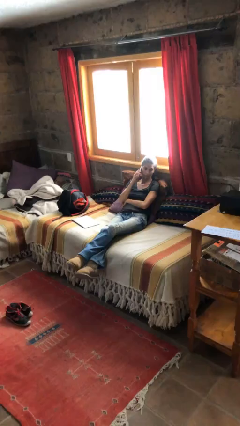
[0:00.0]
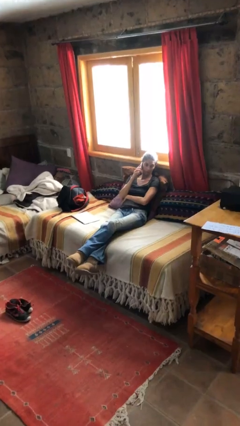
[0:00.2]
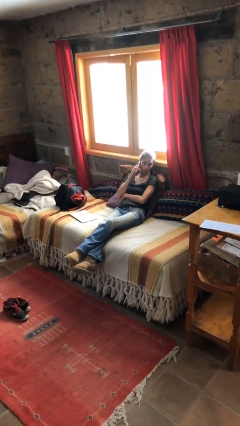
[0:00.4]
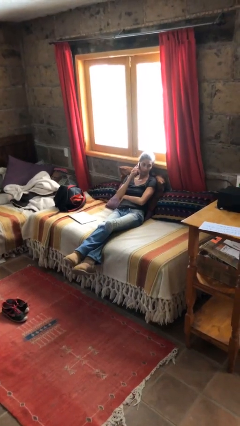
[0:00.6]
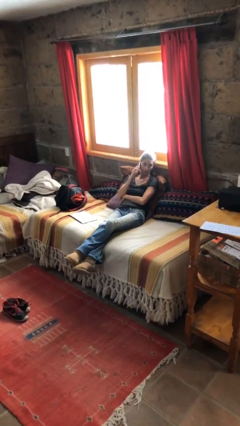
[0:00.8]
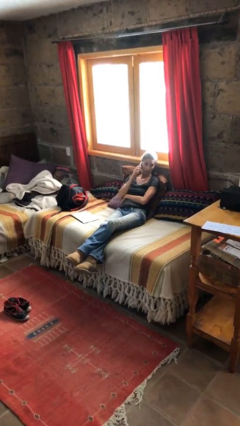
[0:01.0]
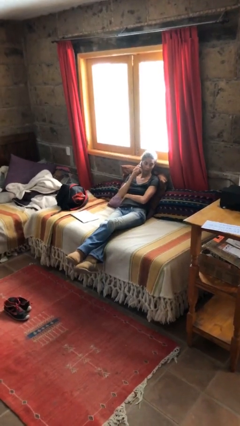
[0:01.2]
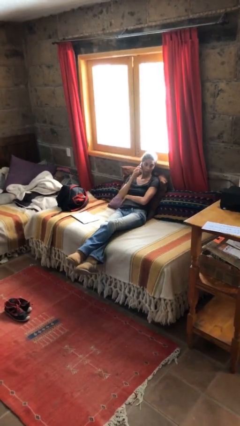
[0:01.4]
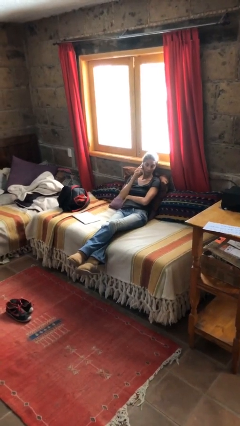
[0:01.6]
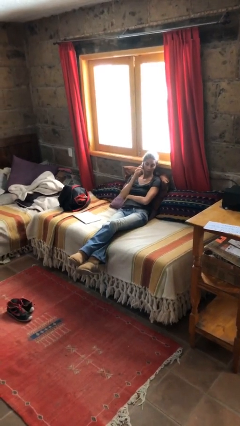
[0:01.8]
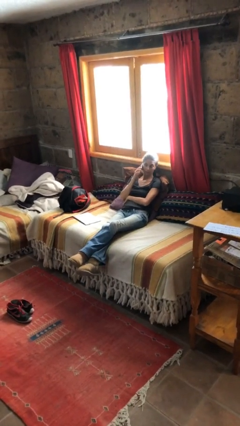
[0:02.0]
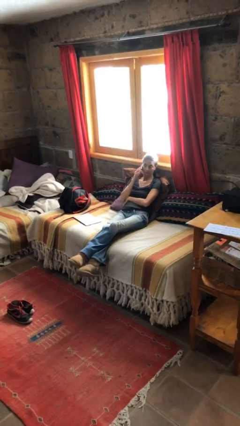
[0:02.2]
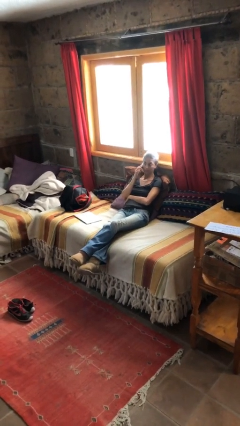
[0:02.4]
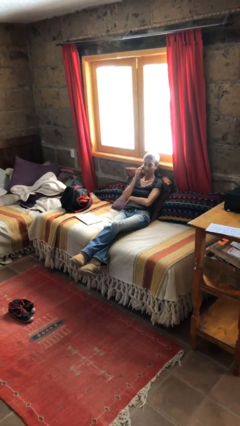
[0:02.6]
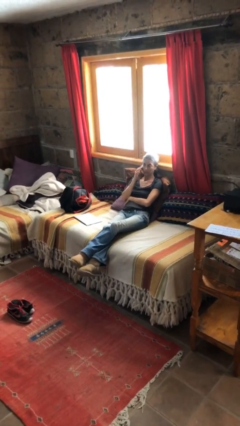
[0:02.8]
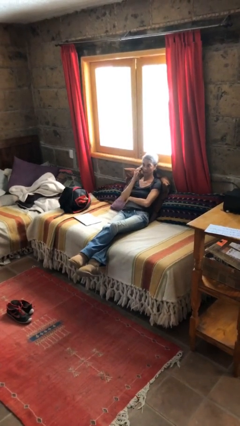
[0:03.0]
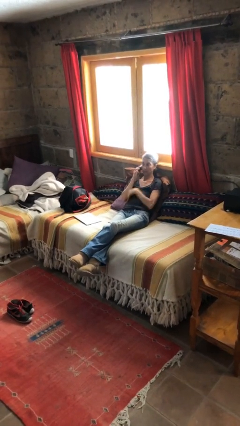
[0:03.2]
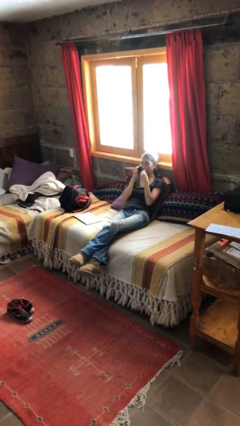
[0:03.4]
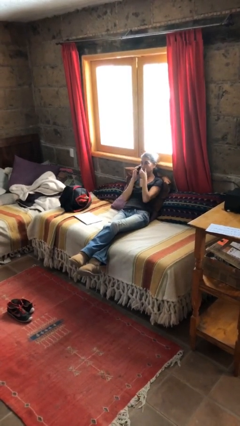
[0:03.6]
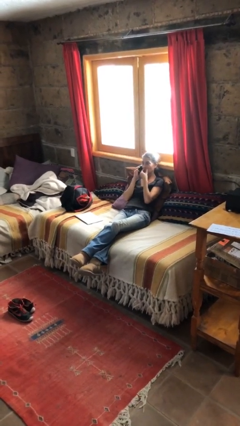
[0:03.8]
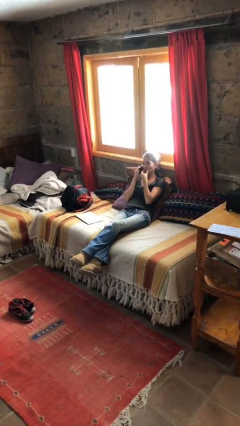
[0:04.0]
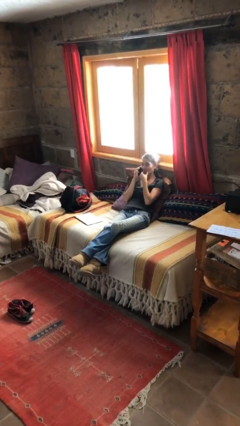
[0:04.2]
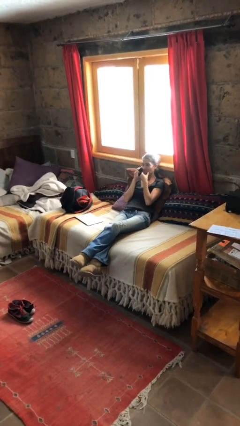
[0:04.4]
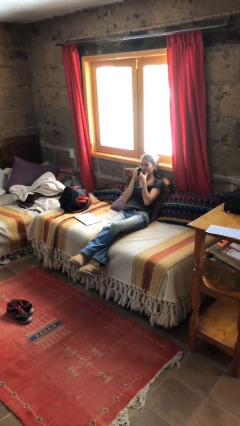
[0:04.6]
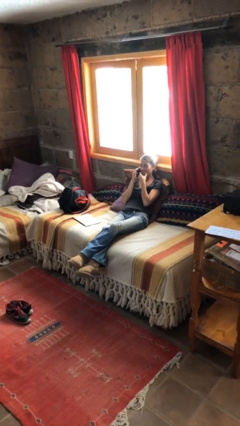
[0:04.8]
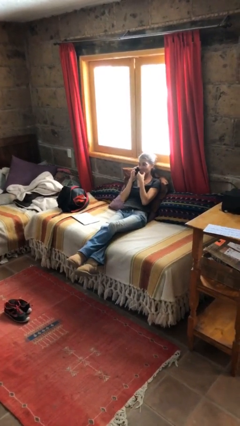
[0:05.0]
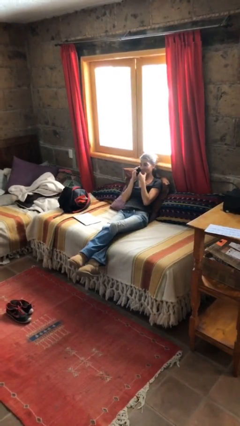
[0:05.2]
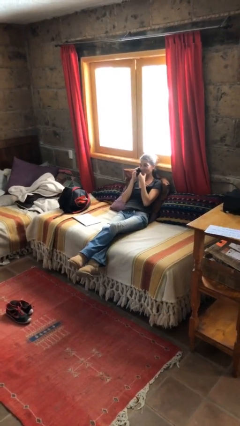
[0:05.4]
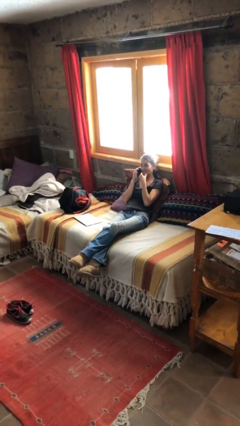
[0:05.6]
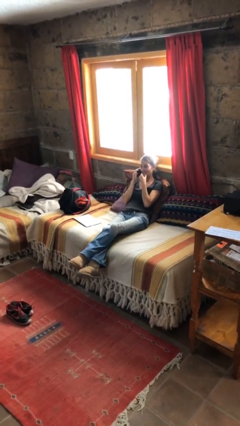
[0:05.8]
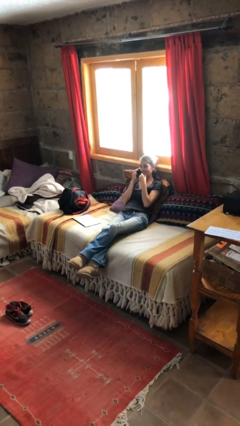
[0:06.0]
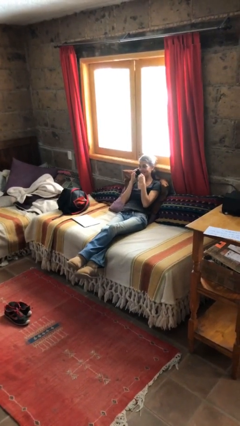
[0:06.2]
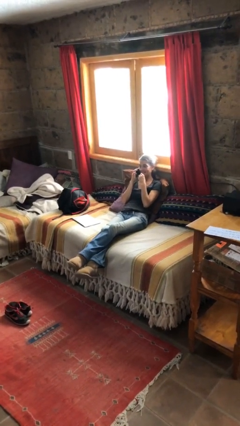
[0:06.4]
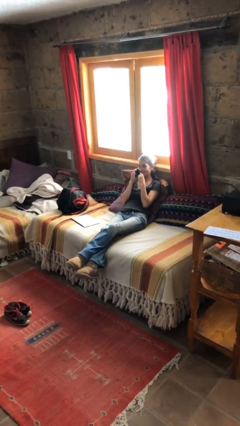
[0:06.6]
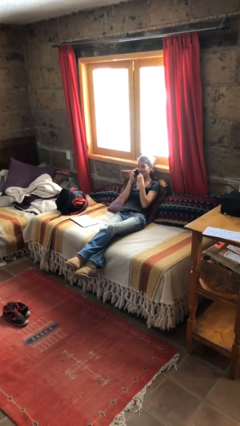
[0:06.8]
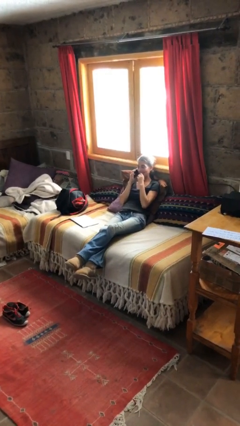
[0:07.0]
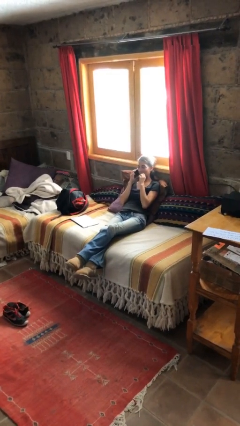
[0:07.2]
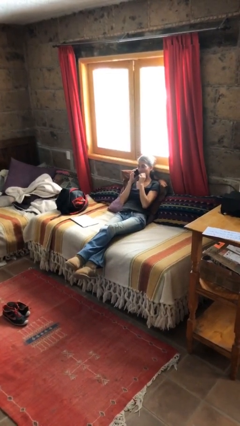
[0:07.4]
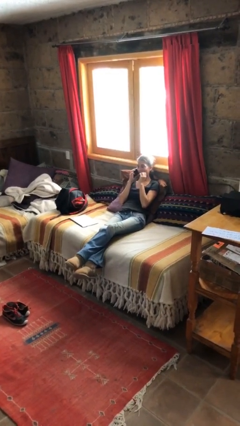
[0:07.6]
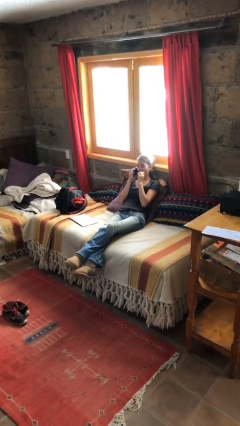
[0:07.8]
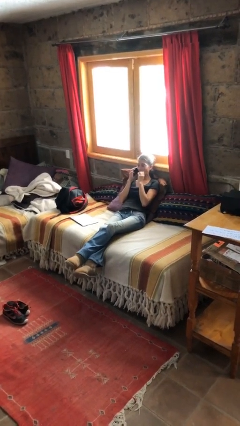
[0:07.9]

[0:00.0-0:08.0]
person talks on phone

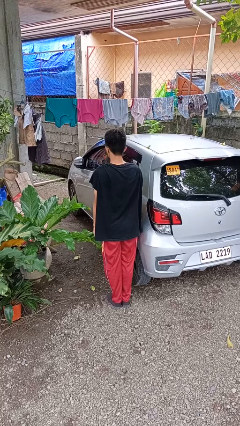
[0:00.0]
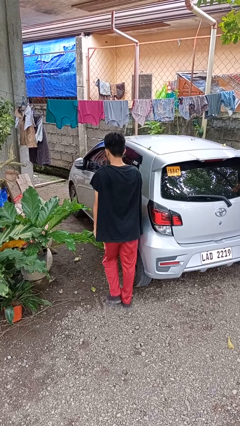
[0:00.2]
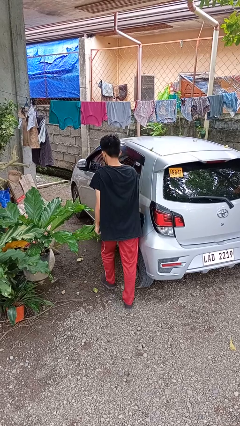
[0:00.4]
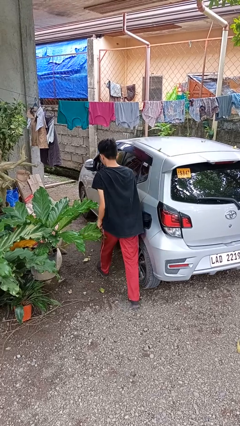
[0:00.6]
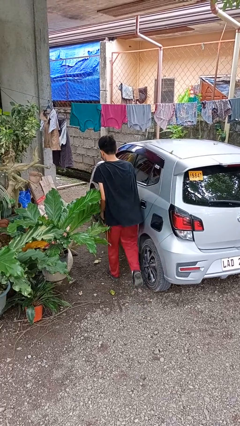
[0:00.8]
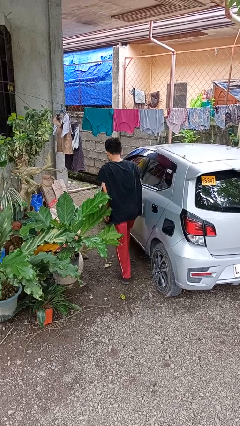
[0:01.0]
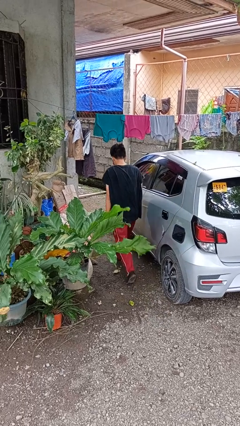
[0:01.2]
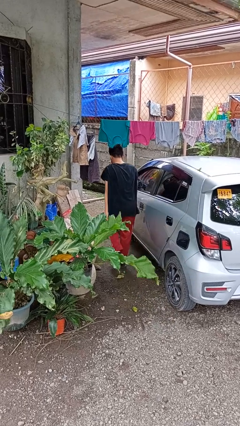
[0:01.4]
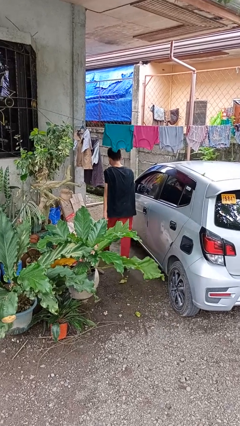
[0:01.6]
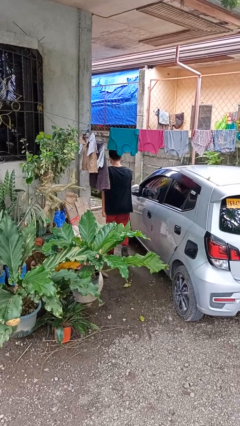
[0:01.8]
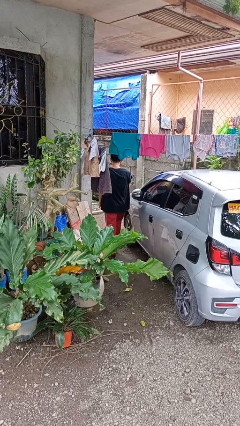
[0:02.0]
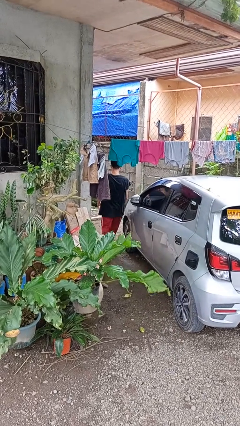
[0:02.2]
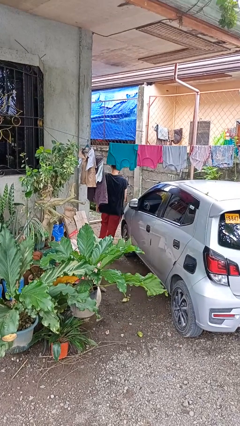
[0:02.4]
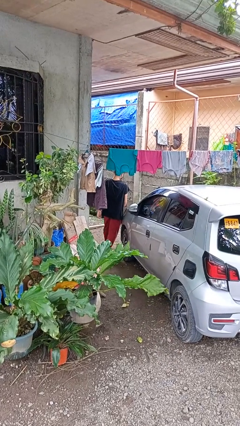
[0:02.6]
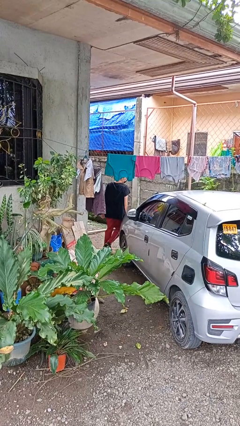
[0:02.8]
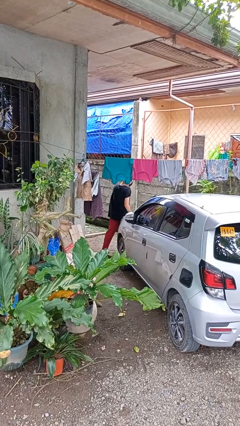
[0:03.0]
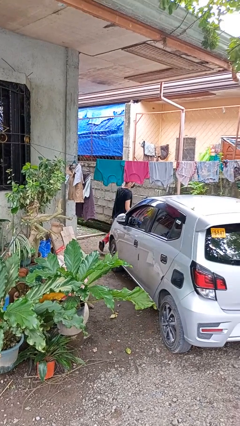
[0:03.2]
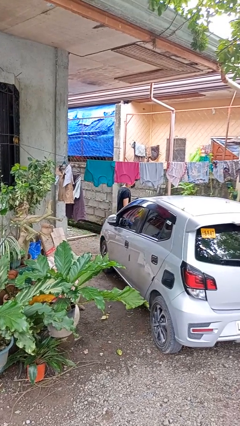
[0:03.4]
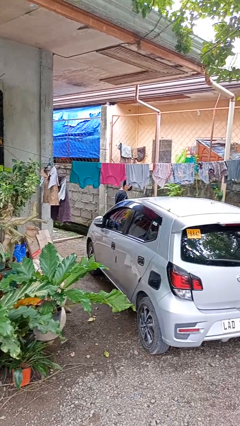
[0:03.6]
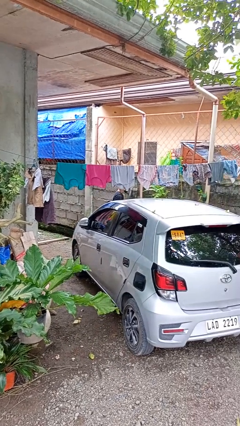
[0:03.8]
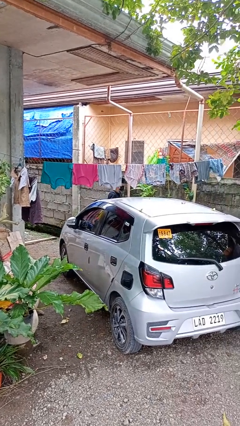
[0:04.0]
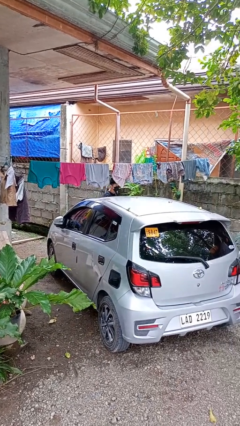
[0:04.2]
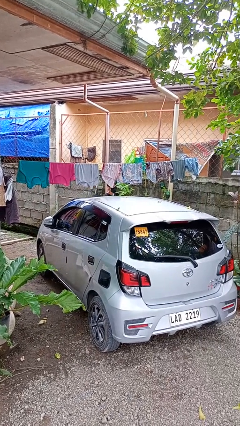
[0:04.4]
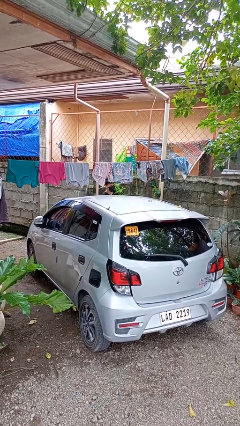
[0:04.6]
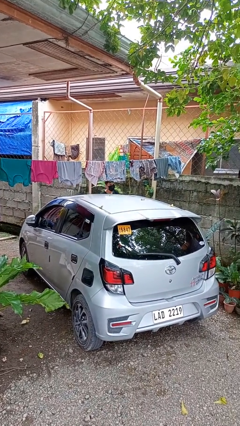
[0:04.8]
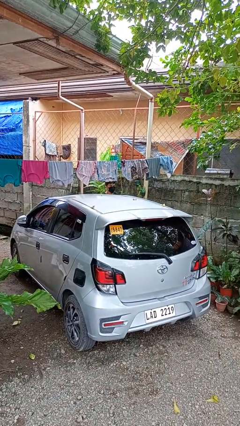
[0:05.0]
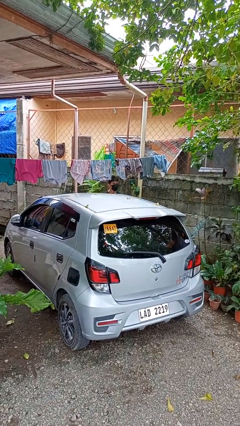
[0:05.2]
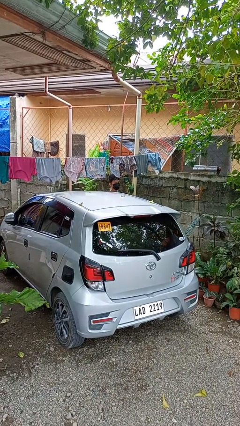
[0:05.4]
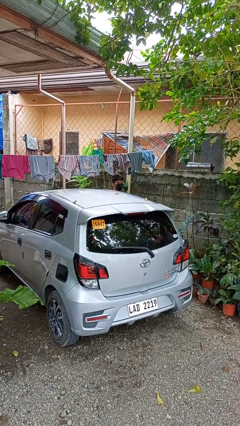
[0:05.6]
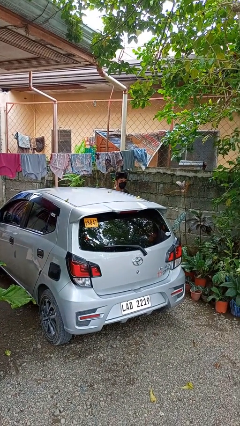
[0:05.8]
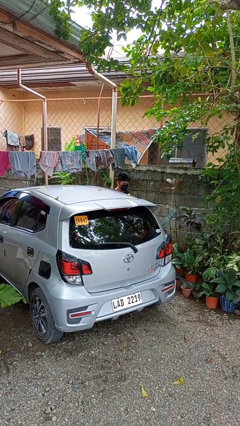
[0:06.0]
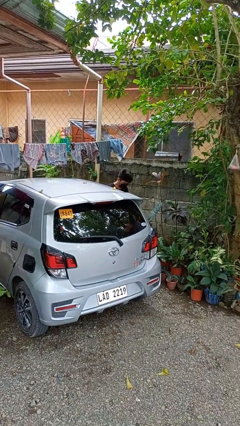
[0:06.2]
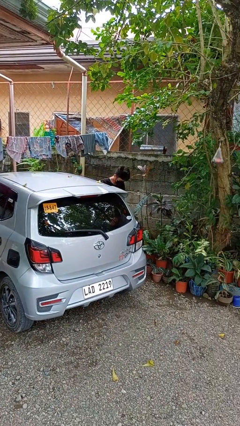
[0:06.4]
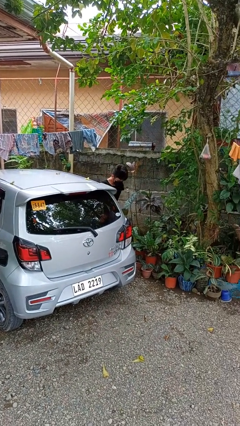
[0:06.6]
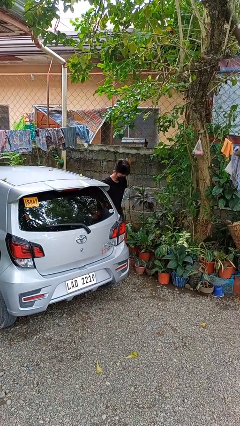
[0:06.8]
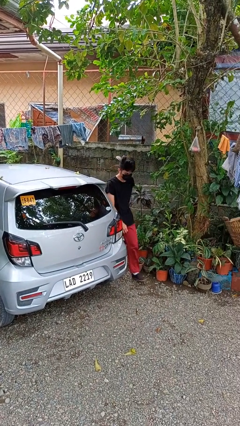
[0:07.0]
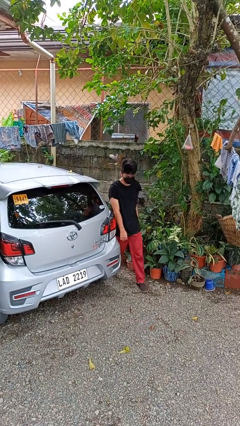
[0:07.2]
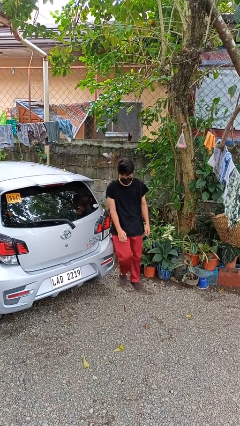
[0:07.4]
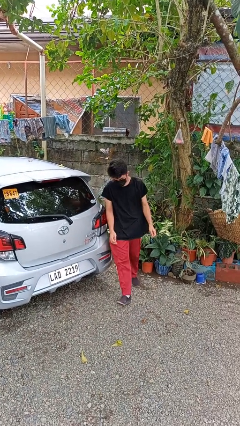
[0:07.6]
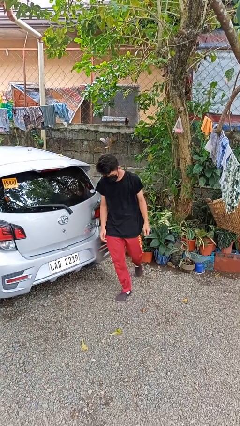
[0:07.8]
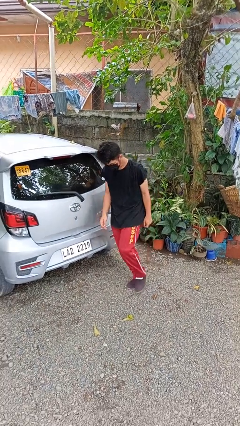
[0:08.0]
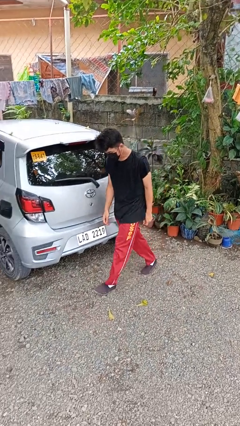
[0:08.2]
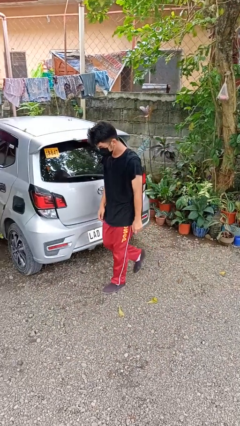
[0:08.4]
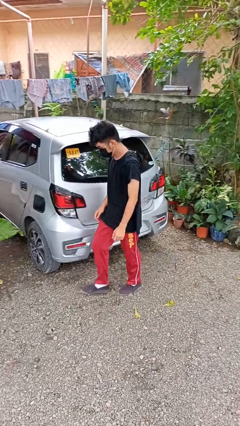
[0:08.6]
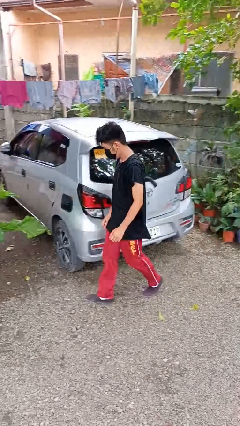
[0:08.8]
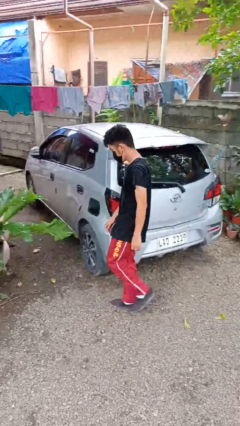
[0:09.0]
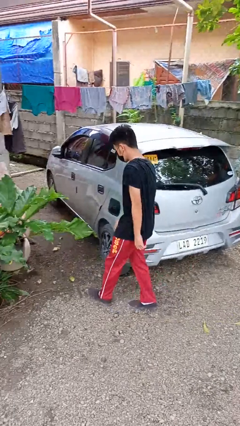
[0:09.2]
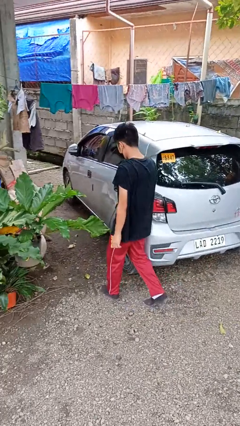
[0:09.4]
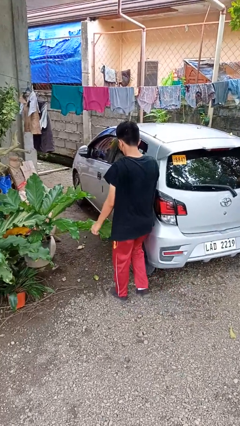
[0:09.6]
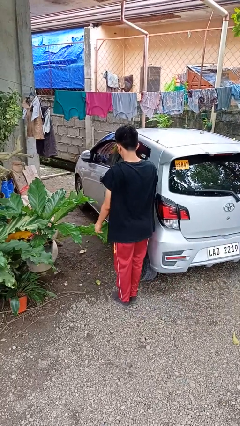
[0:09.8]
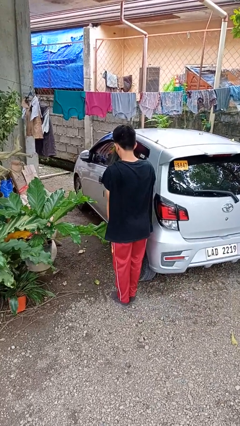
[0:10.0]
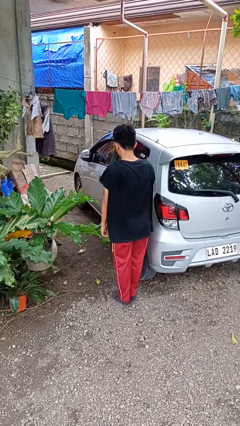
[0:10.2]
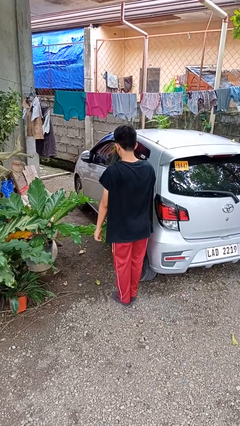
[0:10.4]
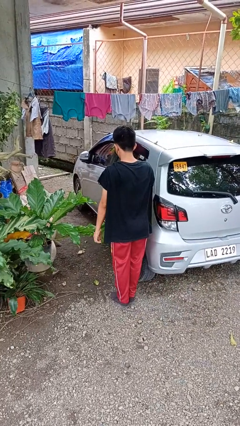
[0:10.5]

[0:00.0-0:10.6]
person walks around car
